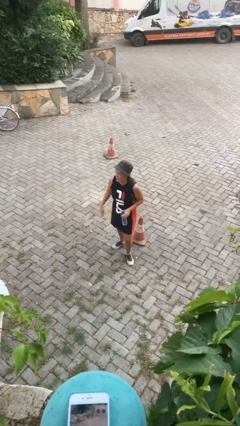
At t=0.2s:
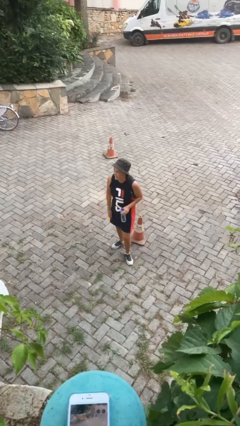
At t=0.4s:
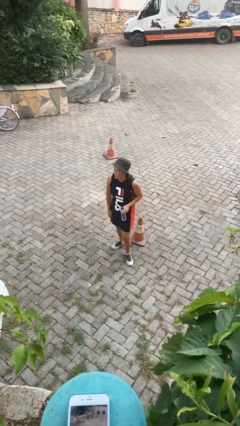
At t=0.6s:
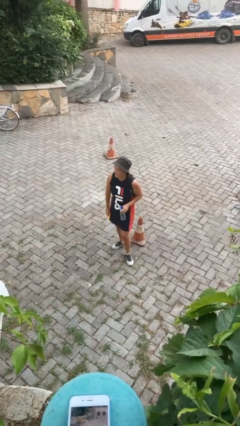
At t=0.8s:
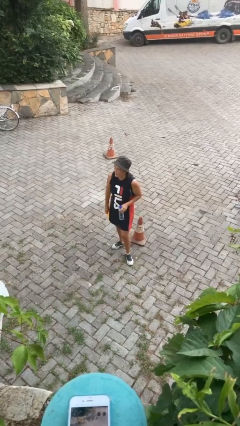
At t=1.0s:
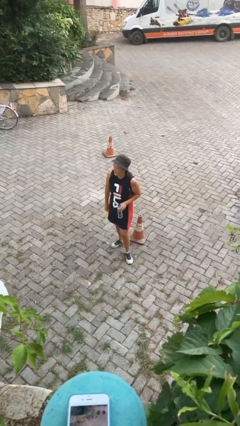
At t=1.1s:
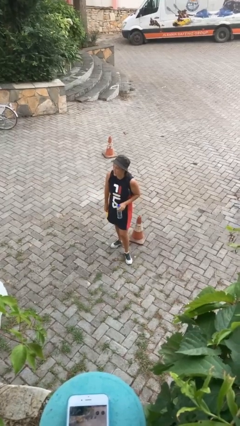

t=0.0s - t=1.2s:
person gestures lower hand

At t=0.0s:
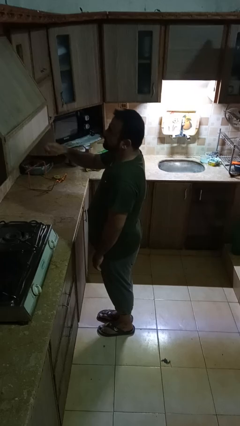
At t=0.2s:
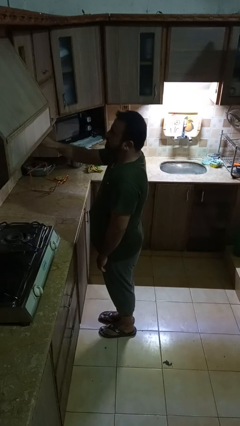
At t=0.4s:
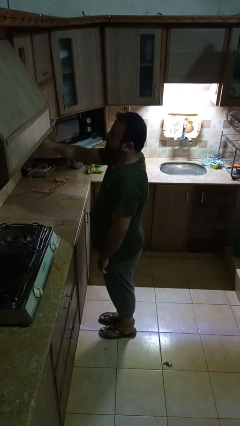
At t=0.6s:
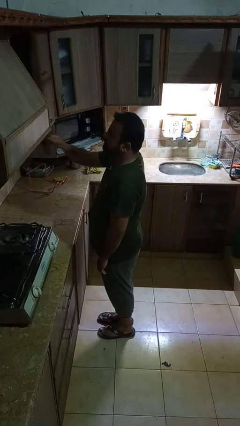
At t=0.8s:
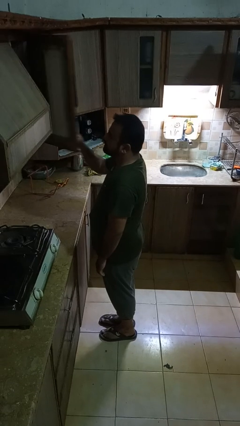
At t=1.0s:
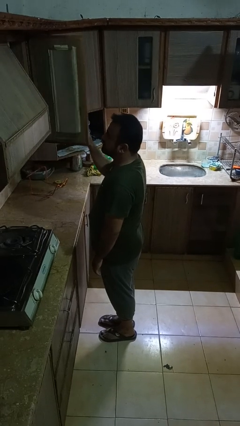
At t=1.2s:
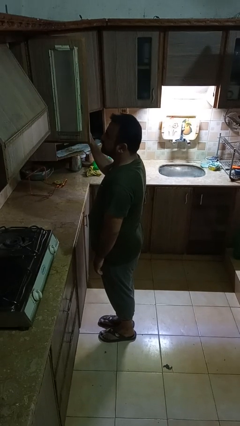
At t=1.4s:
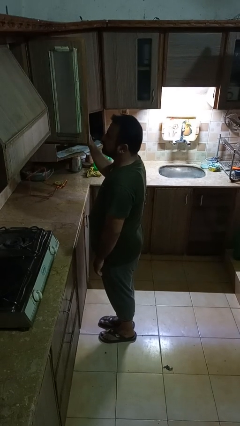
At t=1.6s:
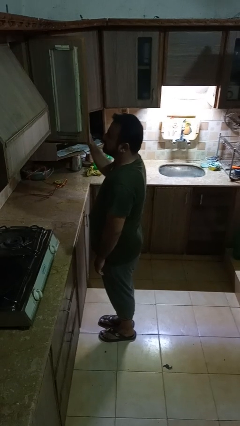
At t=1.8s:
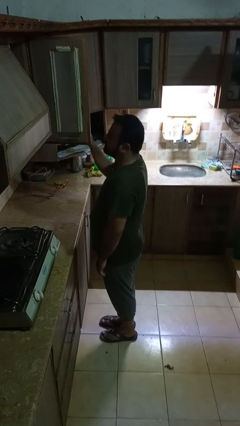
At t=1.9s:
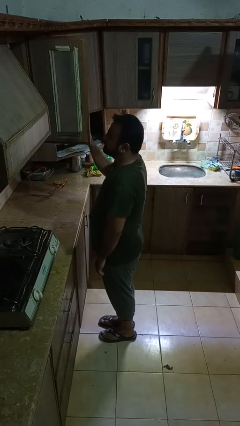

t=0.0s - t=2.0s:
person opens cabinet

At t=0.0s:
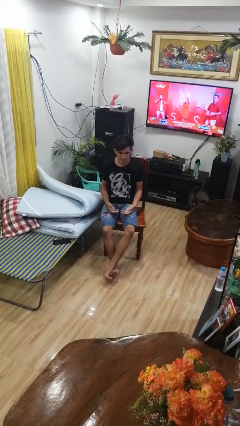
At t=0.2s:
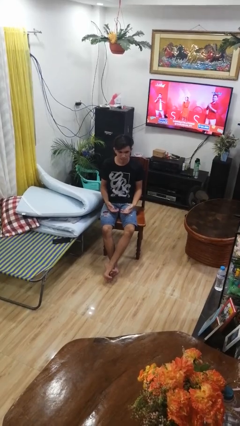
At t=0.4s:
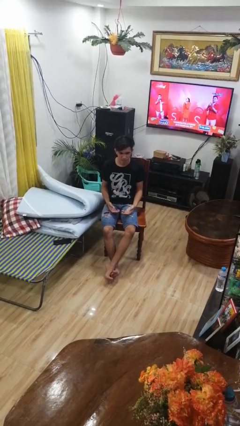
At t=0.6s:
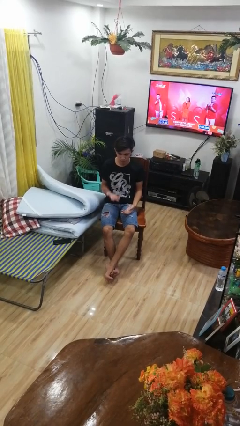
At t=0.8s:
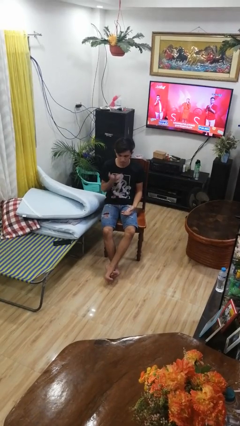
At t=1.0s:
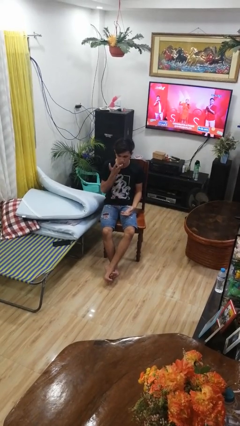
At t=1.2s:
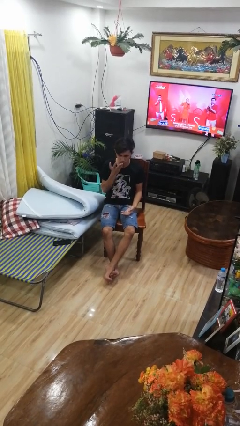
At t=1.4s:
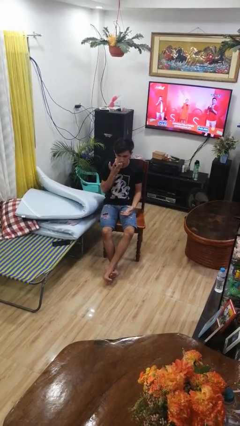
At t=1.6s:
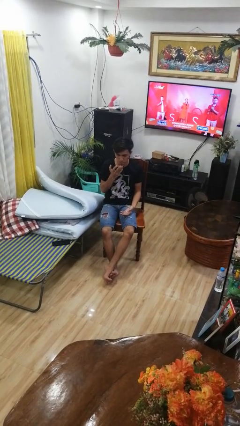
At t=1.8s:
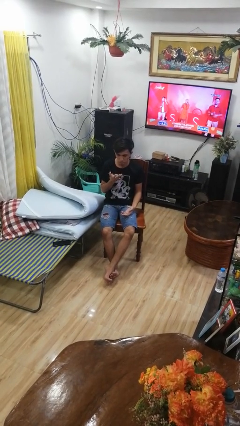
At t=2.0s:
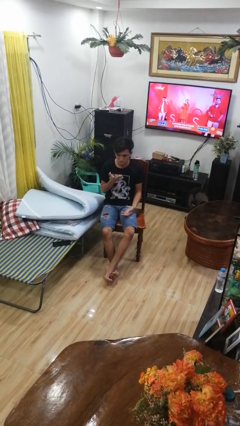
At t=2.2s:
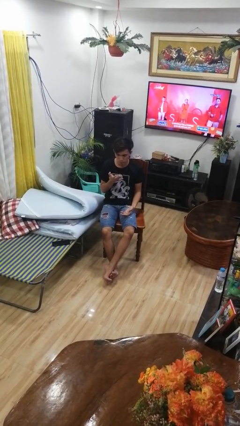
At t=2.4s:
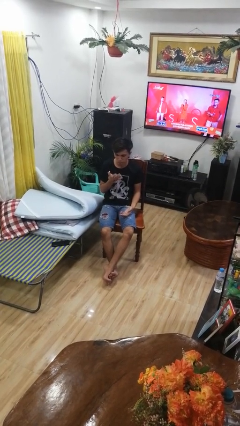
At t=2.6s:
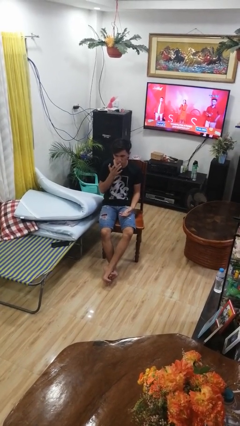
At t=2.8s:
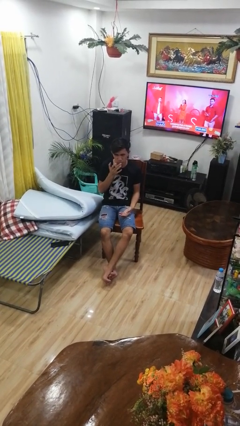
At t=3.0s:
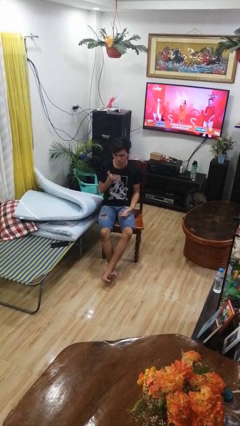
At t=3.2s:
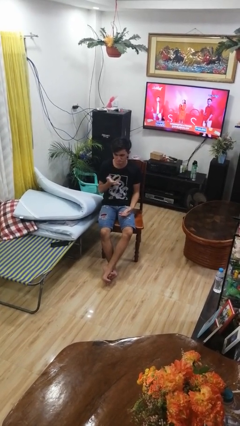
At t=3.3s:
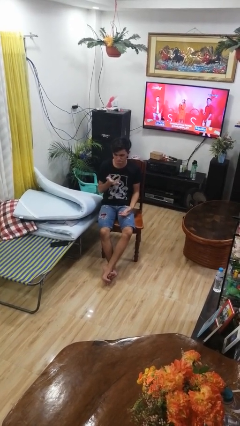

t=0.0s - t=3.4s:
person licks fingers

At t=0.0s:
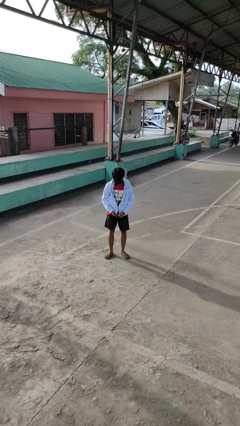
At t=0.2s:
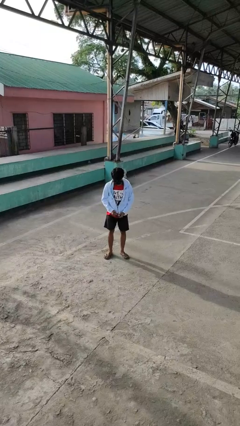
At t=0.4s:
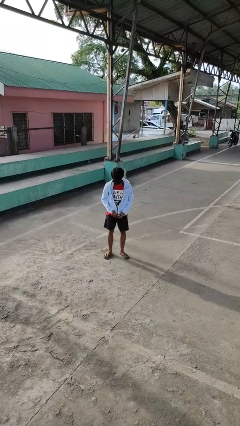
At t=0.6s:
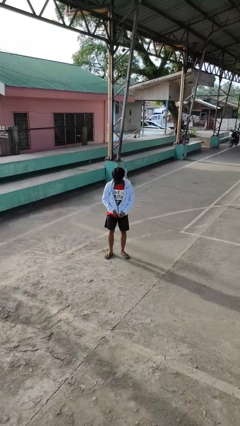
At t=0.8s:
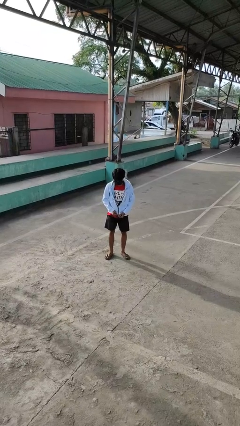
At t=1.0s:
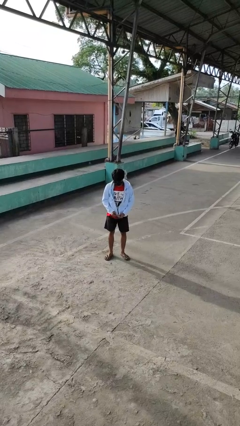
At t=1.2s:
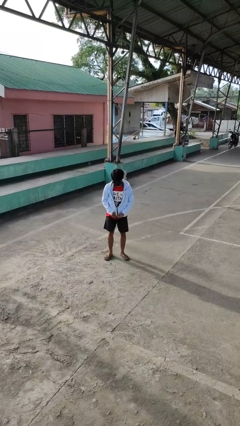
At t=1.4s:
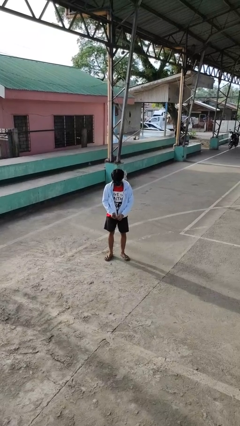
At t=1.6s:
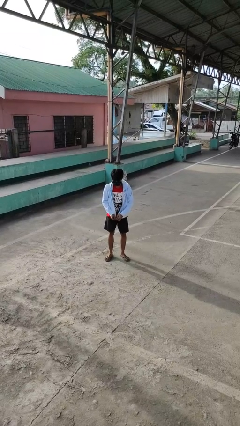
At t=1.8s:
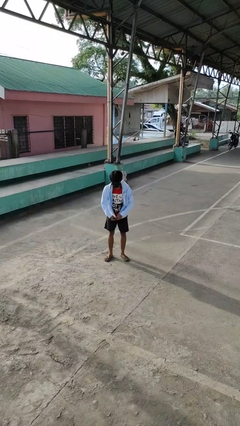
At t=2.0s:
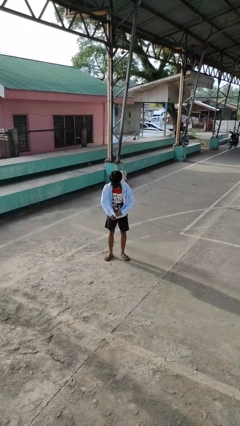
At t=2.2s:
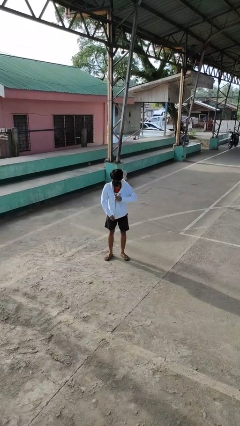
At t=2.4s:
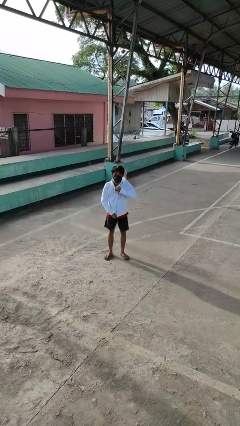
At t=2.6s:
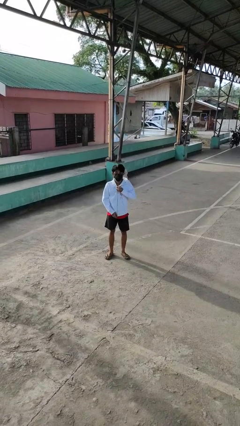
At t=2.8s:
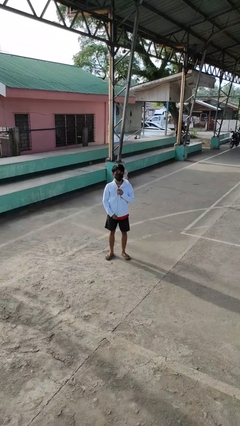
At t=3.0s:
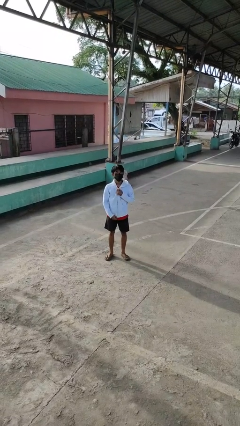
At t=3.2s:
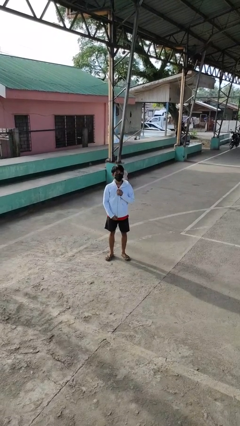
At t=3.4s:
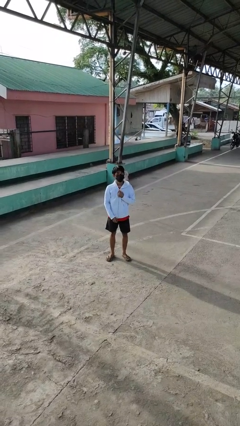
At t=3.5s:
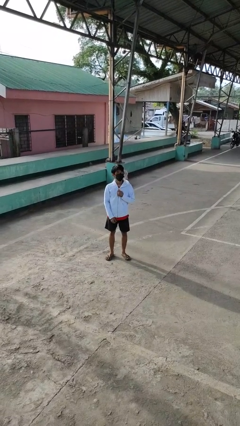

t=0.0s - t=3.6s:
person zips up jacket

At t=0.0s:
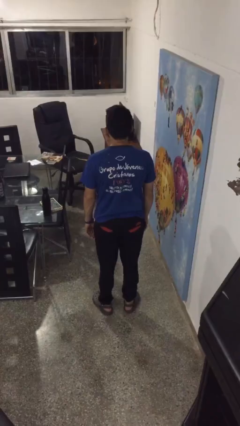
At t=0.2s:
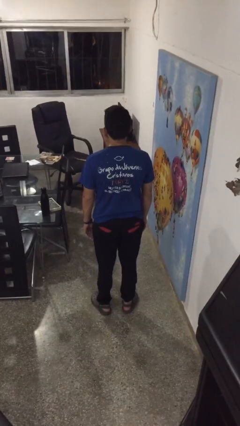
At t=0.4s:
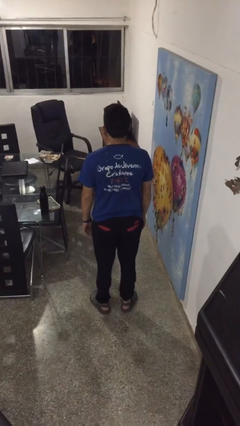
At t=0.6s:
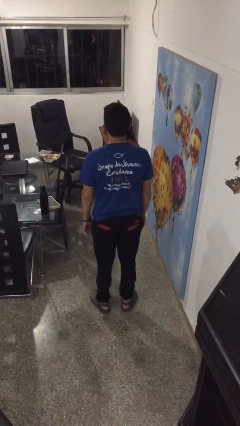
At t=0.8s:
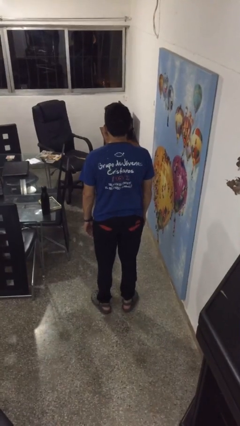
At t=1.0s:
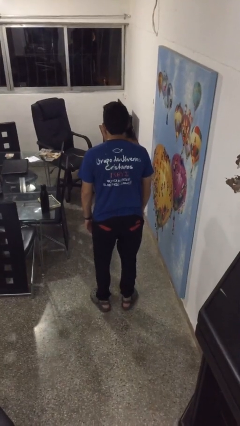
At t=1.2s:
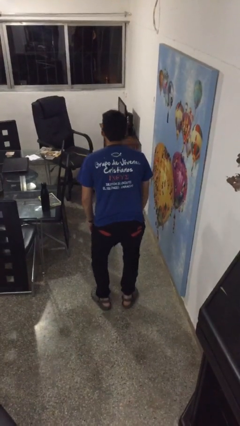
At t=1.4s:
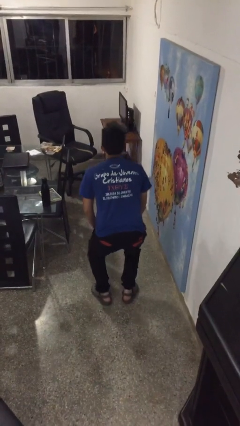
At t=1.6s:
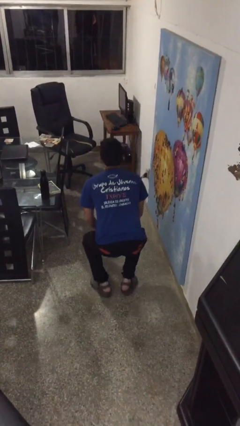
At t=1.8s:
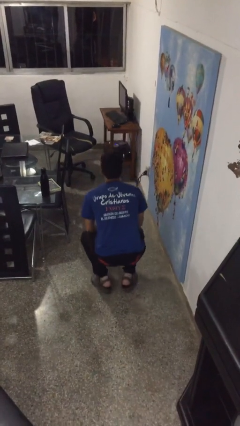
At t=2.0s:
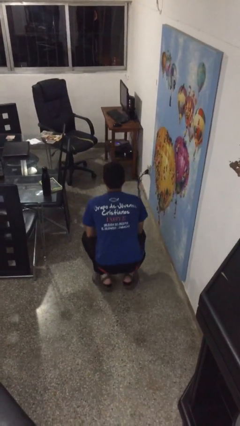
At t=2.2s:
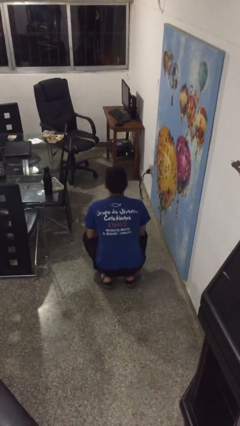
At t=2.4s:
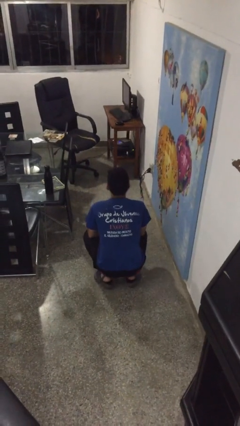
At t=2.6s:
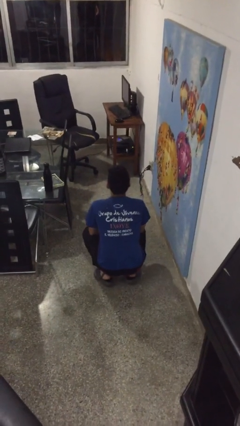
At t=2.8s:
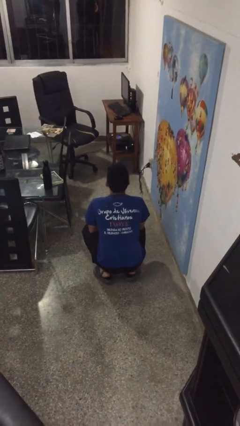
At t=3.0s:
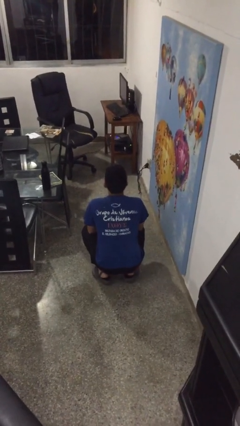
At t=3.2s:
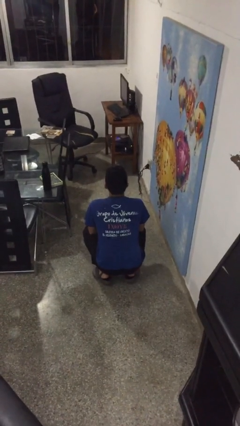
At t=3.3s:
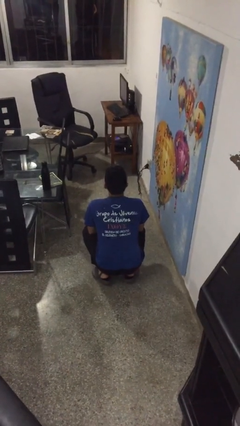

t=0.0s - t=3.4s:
person squats

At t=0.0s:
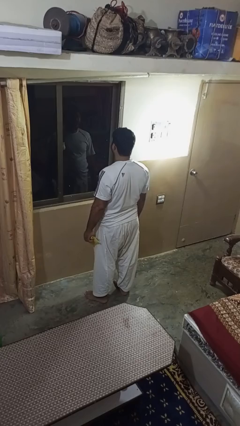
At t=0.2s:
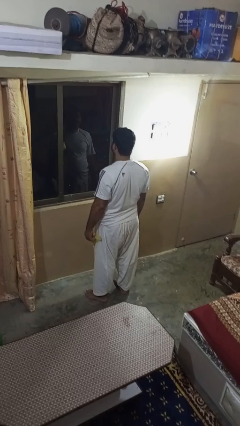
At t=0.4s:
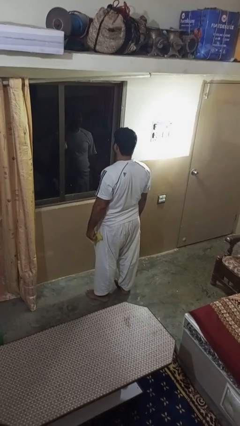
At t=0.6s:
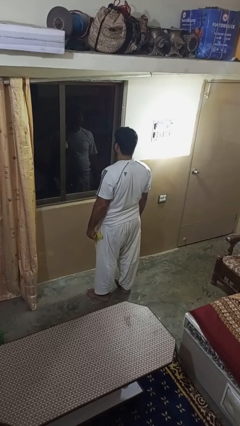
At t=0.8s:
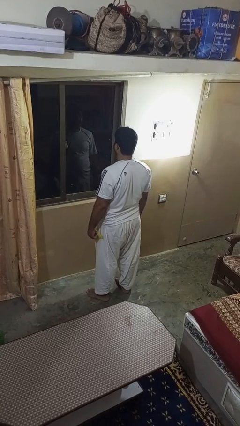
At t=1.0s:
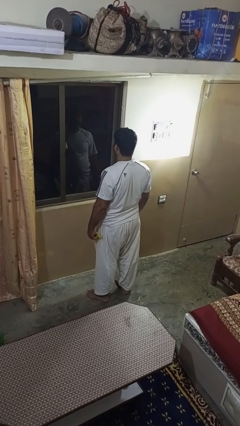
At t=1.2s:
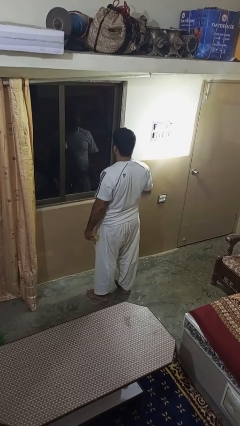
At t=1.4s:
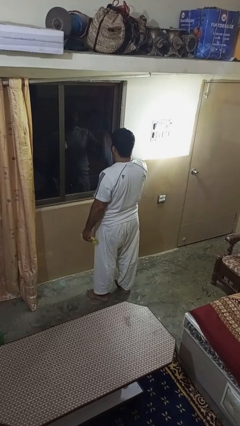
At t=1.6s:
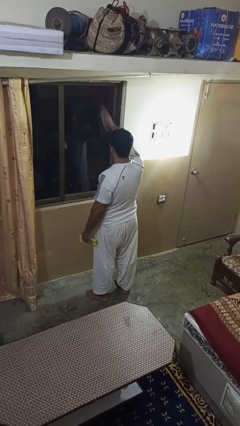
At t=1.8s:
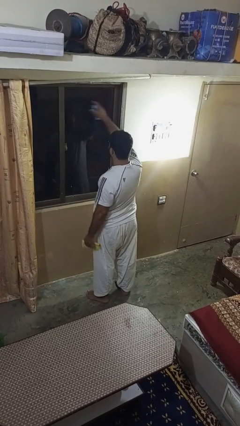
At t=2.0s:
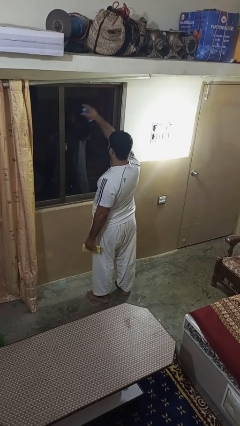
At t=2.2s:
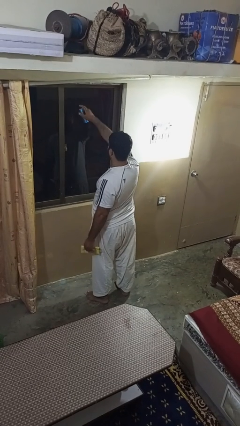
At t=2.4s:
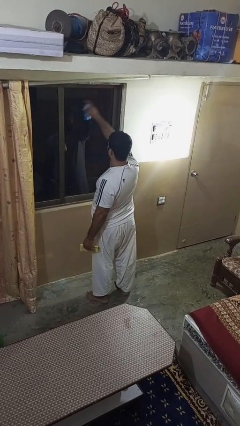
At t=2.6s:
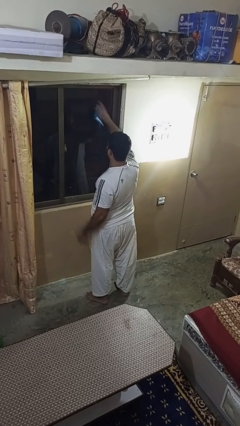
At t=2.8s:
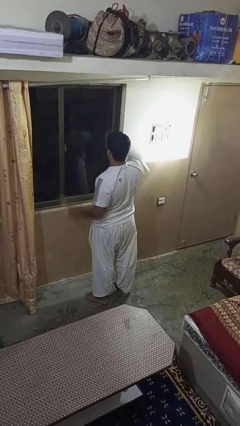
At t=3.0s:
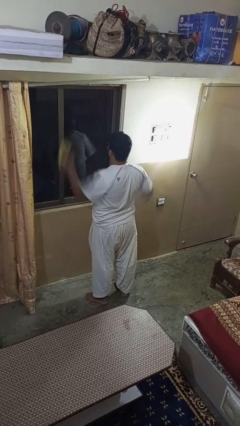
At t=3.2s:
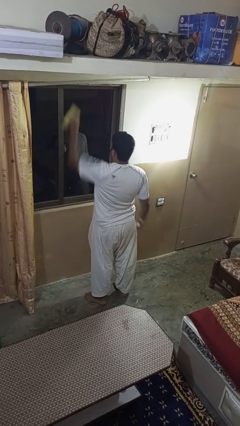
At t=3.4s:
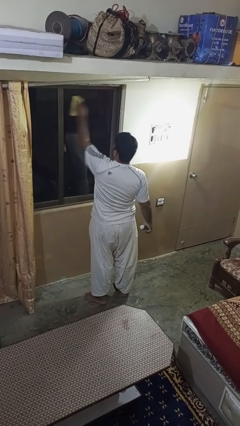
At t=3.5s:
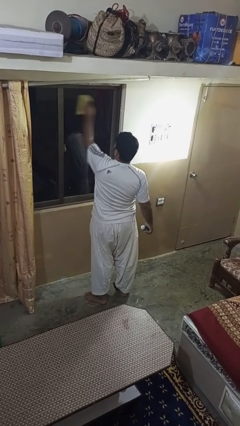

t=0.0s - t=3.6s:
person sprays from bottle
